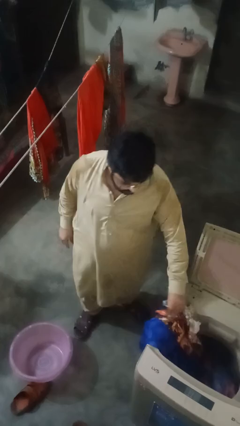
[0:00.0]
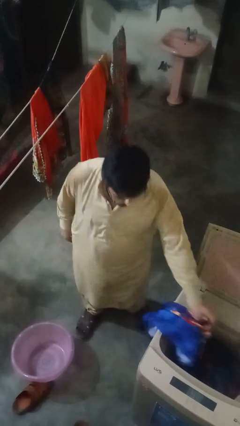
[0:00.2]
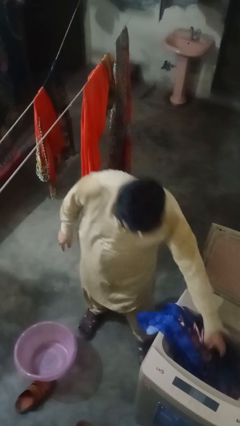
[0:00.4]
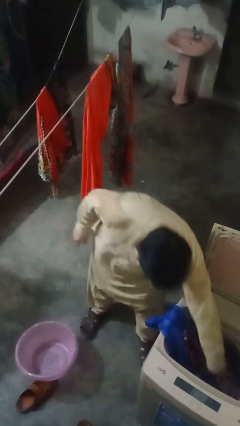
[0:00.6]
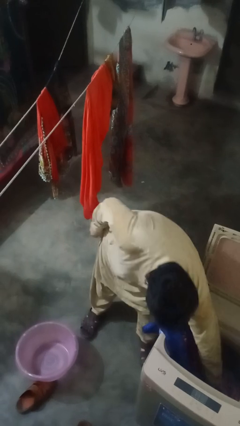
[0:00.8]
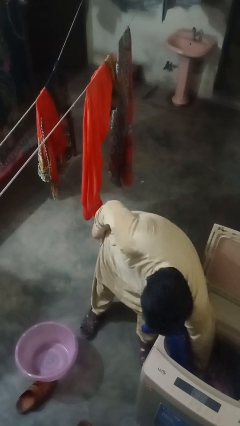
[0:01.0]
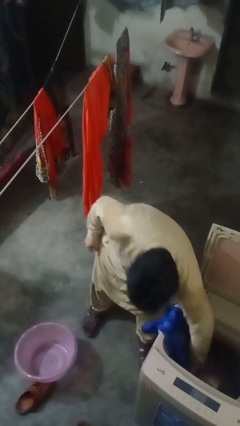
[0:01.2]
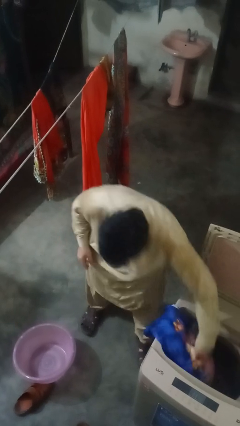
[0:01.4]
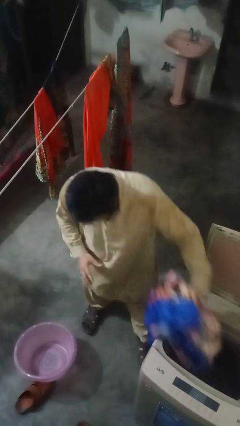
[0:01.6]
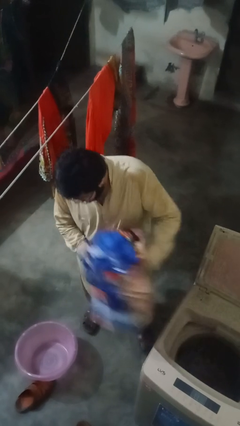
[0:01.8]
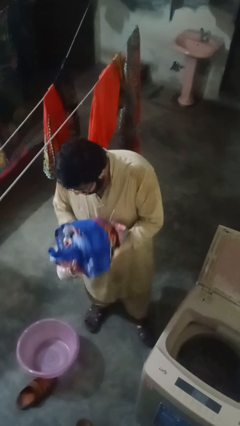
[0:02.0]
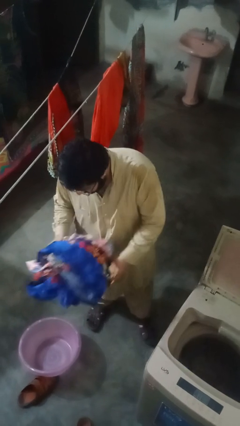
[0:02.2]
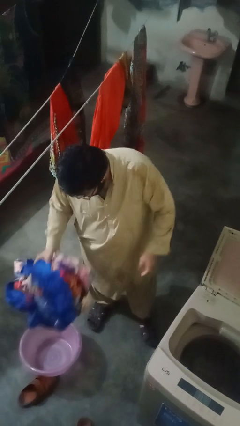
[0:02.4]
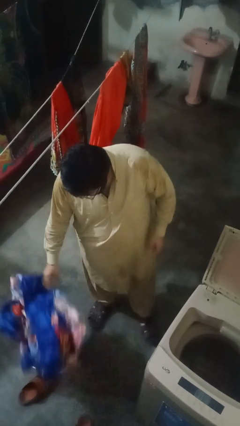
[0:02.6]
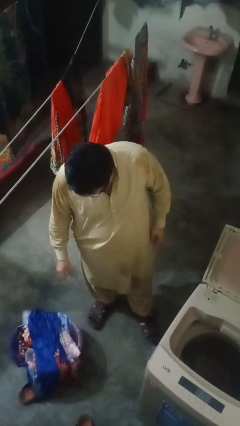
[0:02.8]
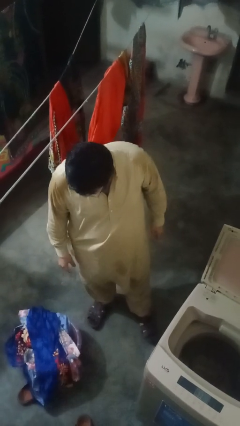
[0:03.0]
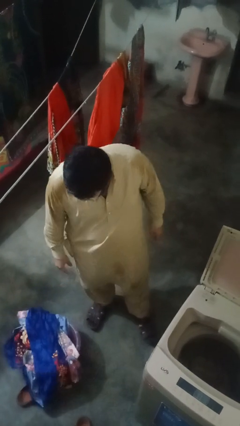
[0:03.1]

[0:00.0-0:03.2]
person loads clotheswasher

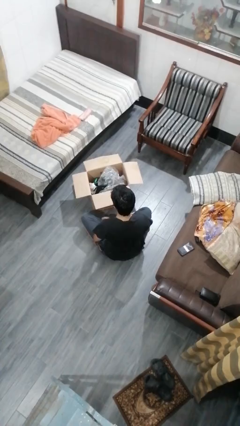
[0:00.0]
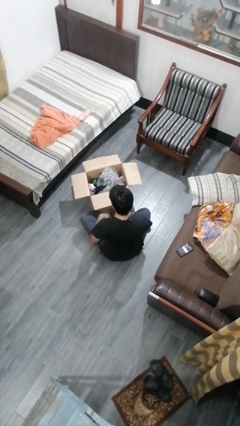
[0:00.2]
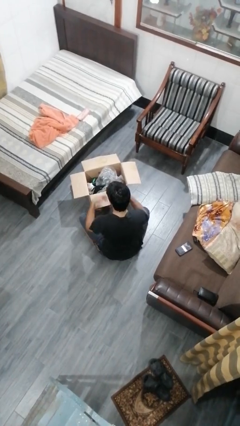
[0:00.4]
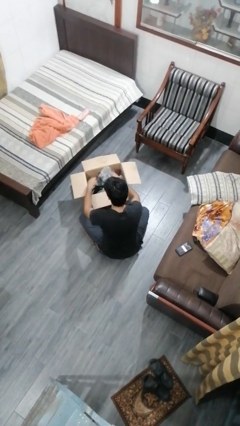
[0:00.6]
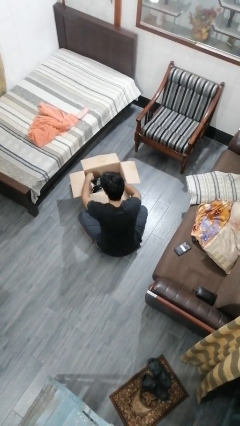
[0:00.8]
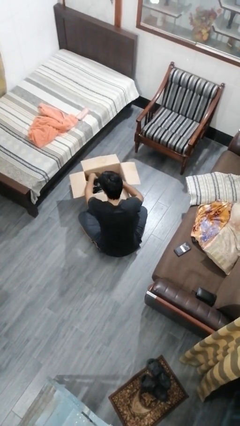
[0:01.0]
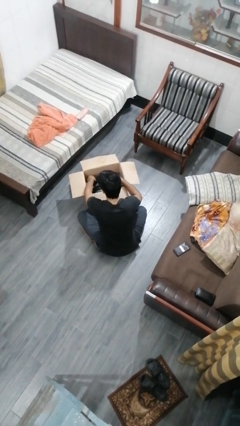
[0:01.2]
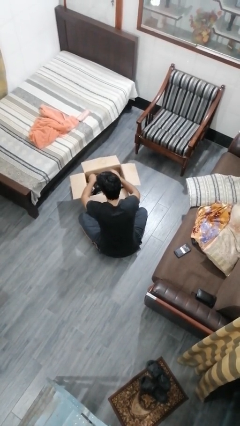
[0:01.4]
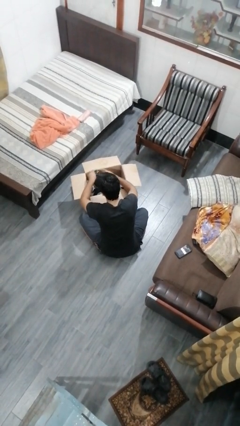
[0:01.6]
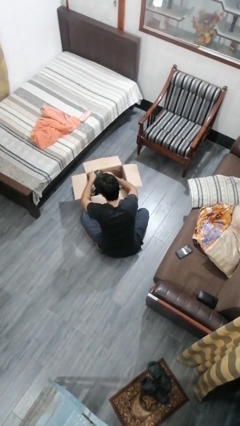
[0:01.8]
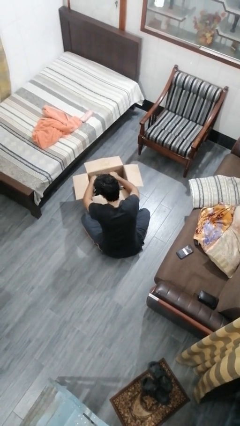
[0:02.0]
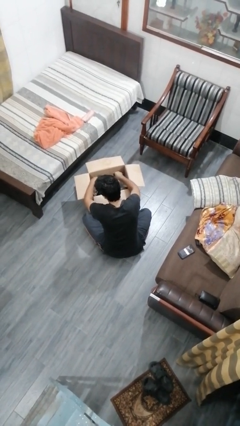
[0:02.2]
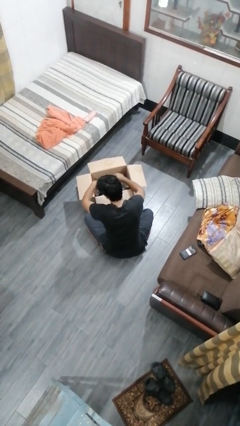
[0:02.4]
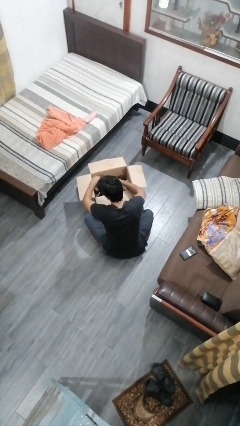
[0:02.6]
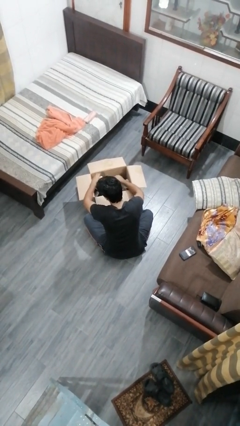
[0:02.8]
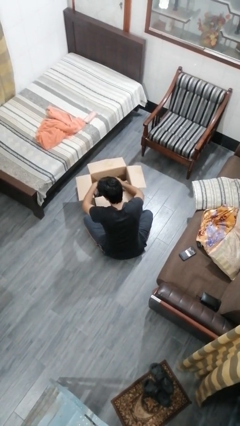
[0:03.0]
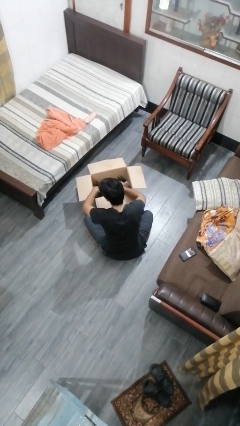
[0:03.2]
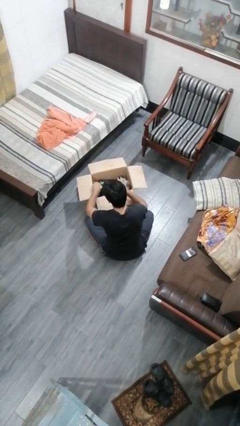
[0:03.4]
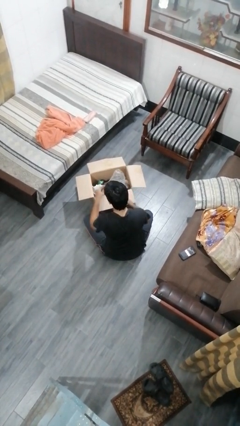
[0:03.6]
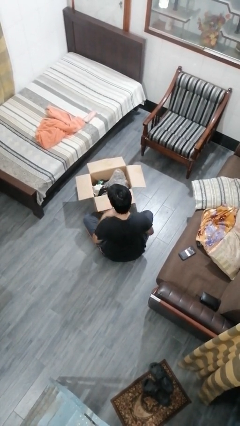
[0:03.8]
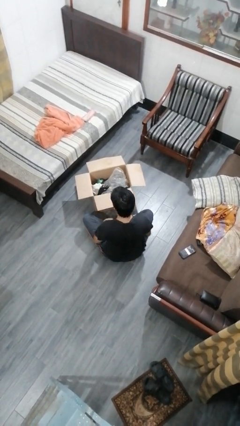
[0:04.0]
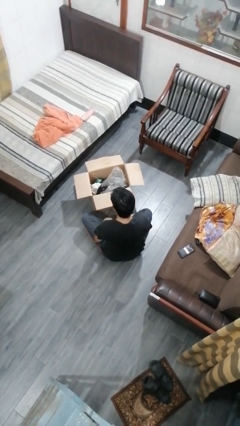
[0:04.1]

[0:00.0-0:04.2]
person searches in box

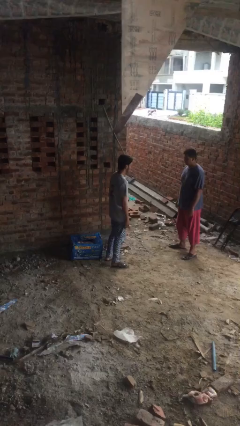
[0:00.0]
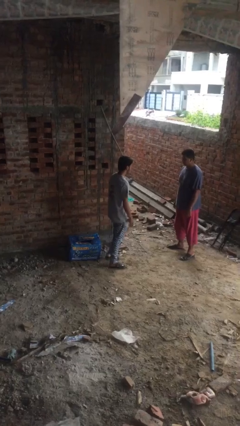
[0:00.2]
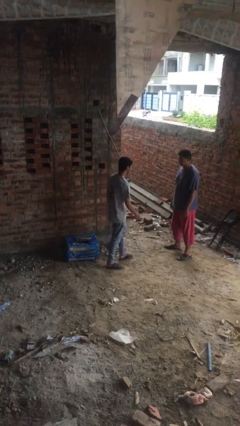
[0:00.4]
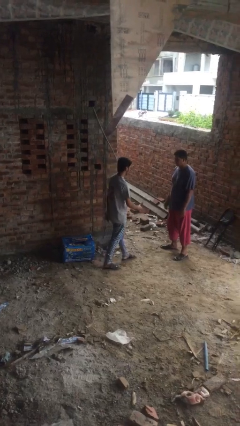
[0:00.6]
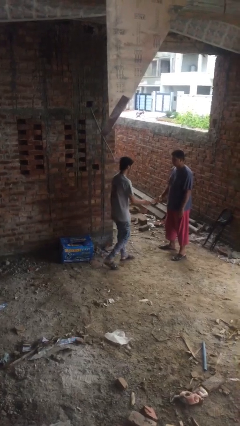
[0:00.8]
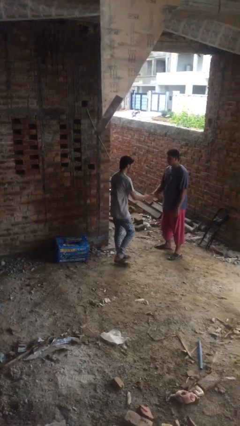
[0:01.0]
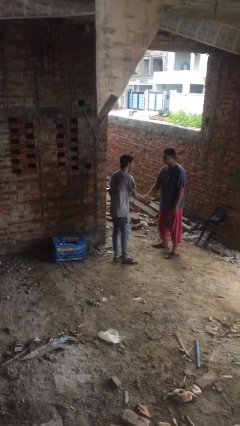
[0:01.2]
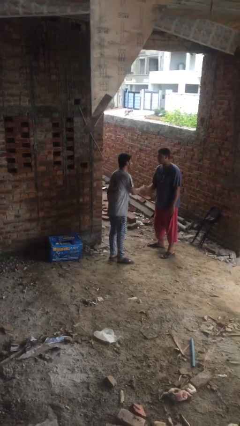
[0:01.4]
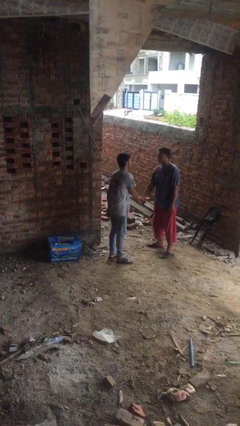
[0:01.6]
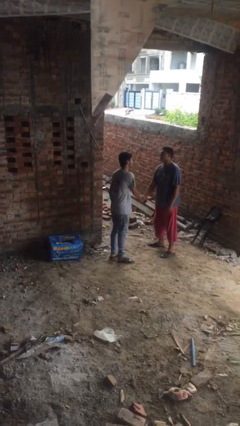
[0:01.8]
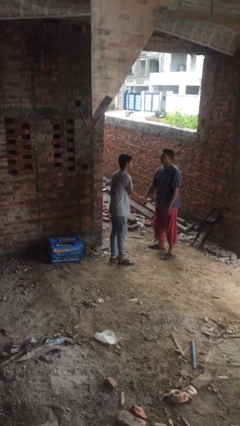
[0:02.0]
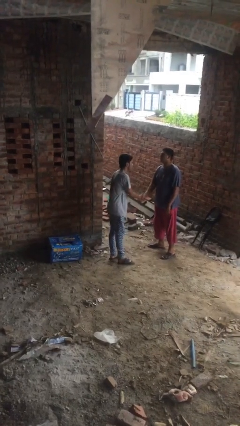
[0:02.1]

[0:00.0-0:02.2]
person shakes hand

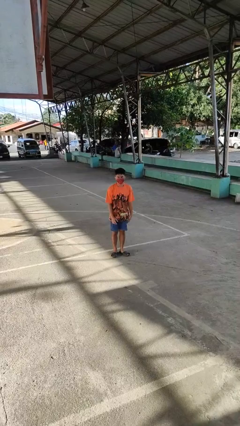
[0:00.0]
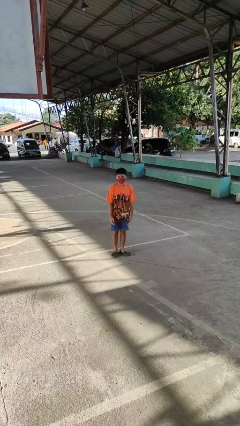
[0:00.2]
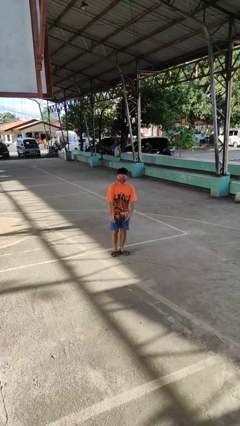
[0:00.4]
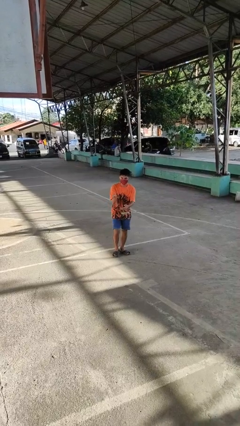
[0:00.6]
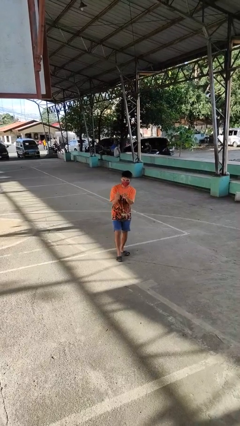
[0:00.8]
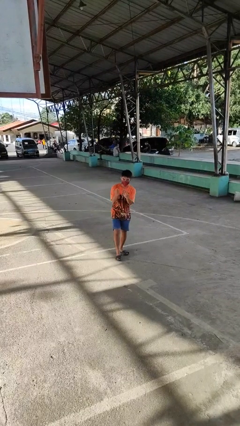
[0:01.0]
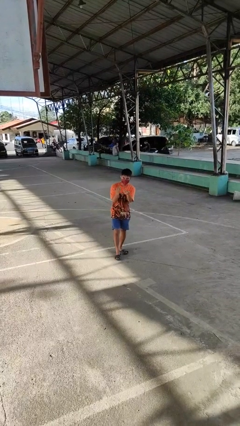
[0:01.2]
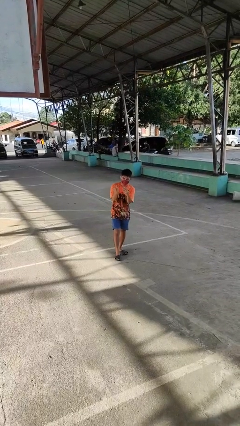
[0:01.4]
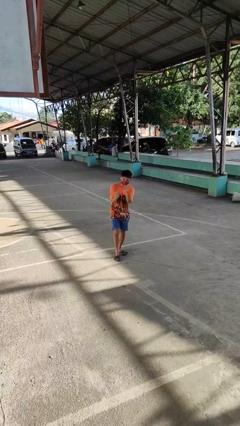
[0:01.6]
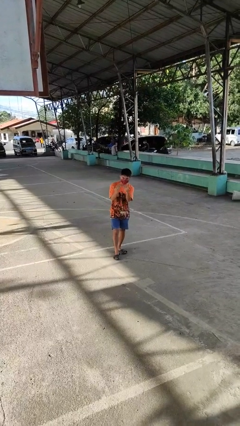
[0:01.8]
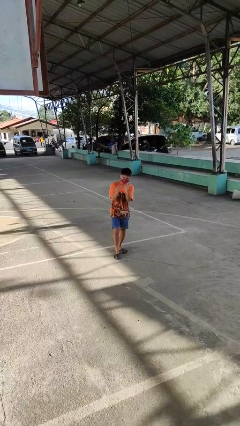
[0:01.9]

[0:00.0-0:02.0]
person gestures come here

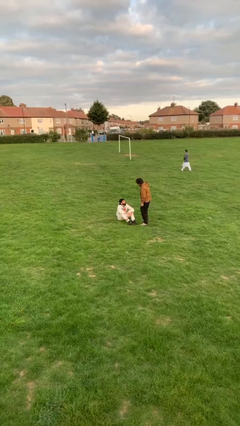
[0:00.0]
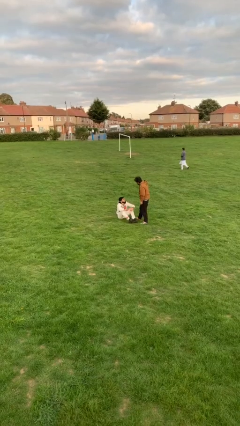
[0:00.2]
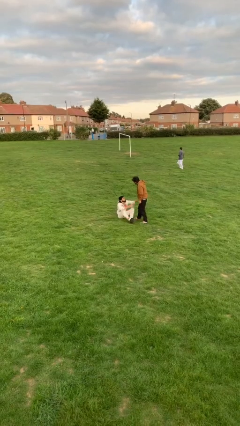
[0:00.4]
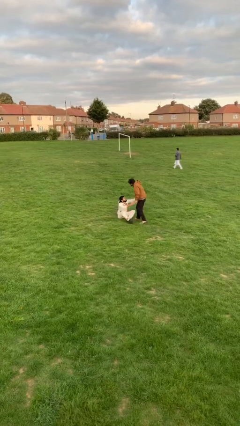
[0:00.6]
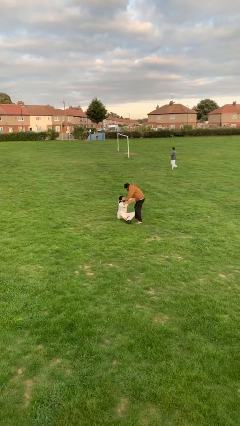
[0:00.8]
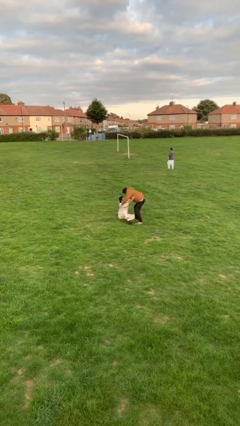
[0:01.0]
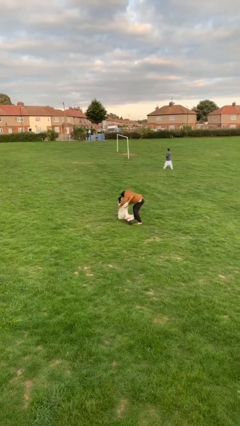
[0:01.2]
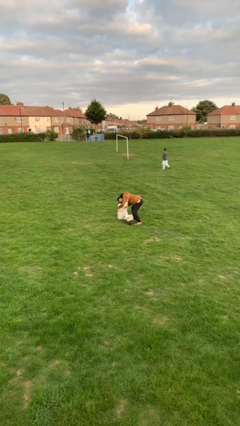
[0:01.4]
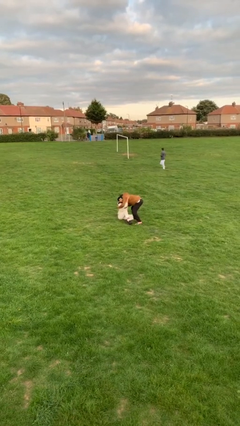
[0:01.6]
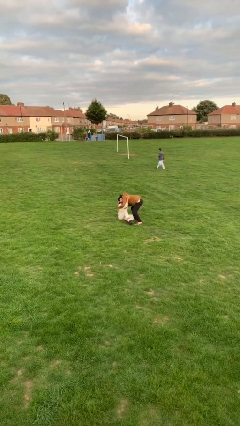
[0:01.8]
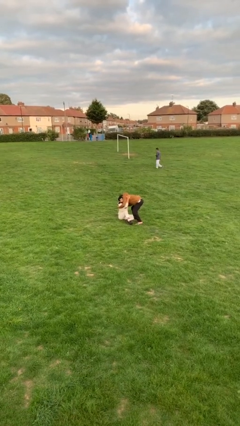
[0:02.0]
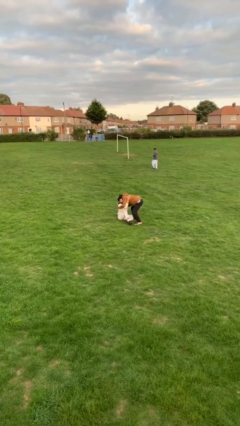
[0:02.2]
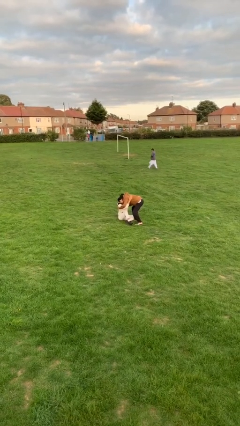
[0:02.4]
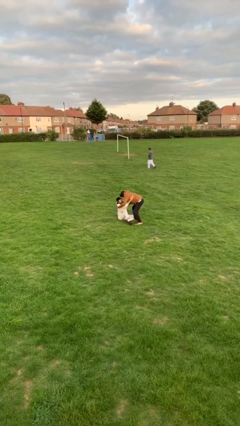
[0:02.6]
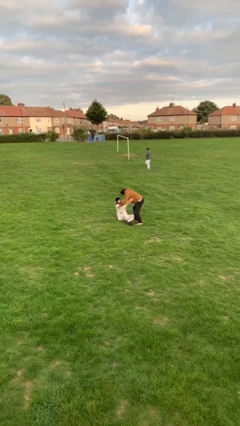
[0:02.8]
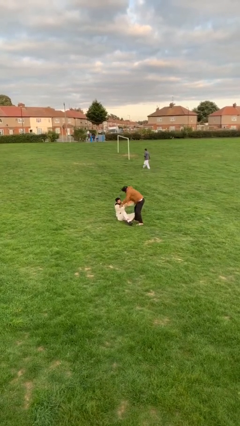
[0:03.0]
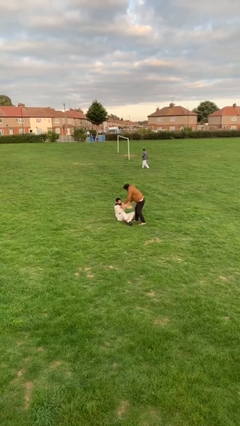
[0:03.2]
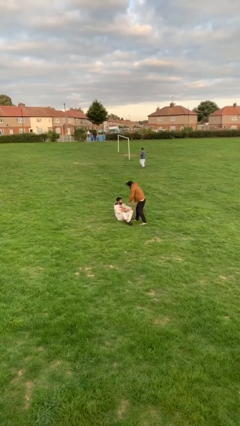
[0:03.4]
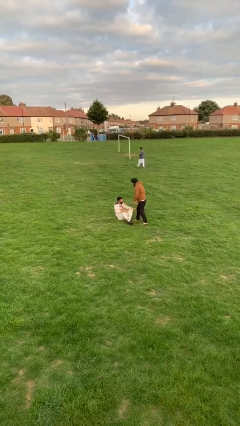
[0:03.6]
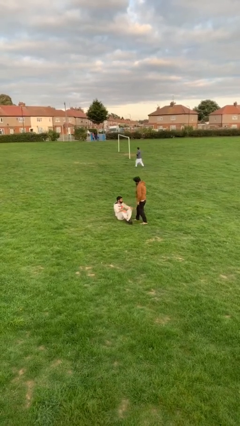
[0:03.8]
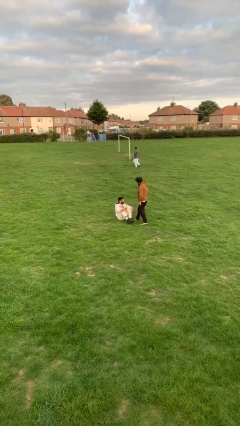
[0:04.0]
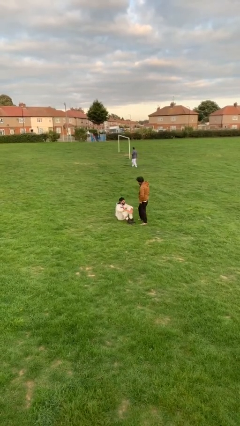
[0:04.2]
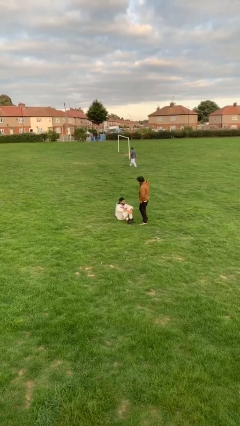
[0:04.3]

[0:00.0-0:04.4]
person embraces person

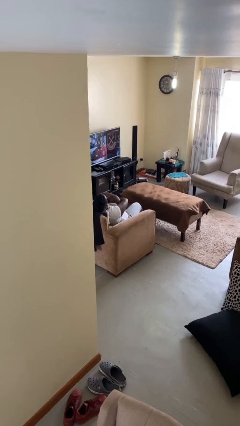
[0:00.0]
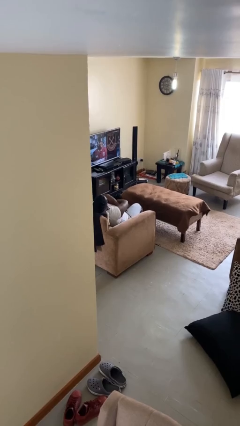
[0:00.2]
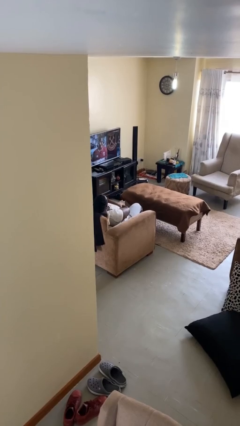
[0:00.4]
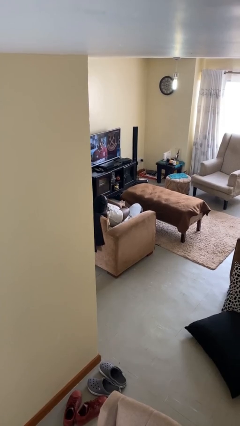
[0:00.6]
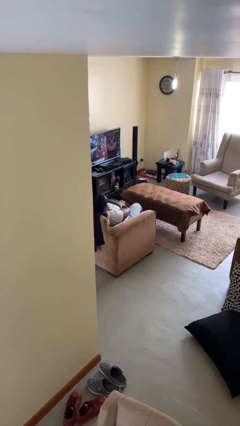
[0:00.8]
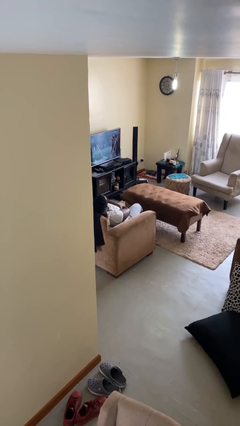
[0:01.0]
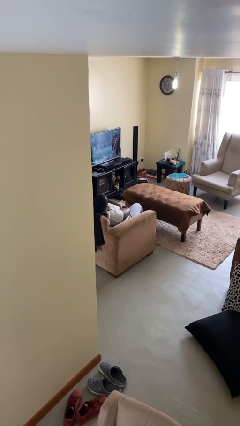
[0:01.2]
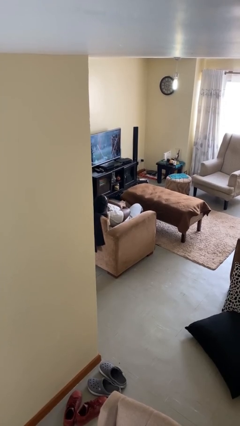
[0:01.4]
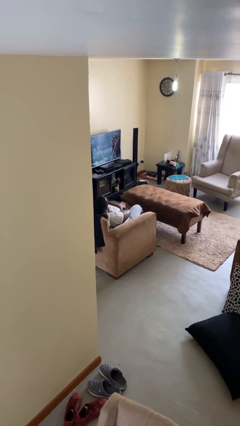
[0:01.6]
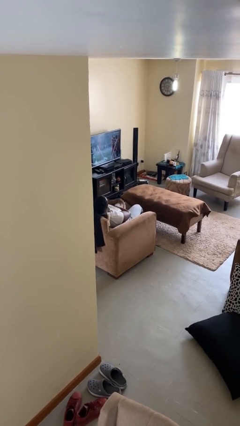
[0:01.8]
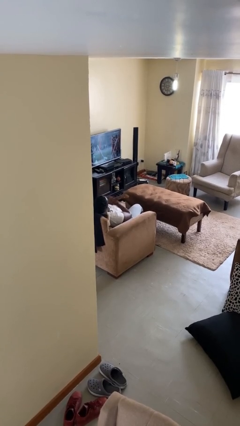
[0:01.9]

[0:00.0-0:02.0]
person crosses arms
